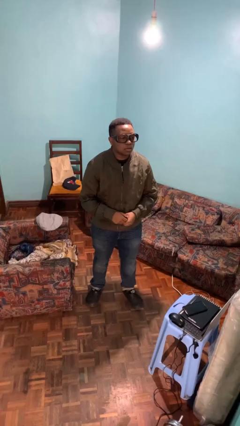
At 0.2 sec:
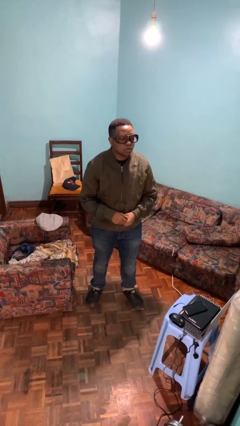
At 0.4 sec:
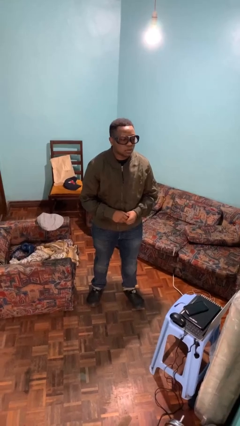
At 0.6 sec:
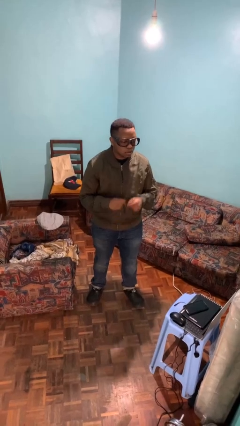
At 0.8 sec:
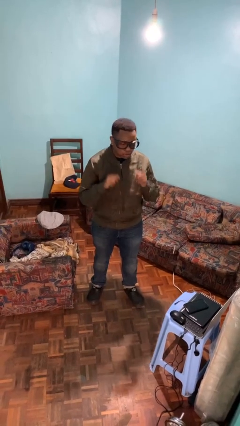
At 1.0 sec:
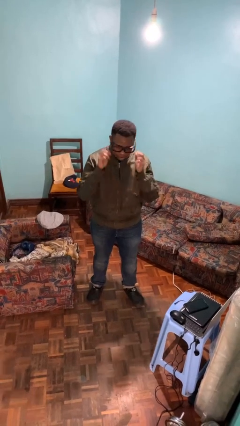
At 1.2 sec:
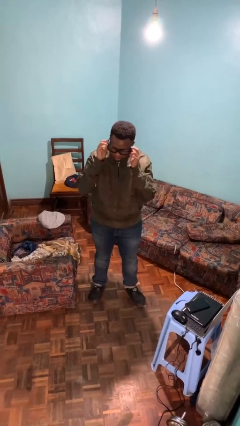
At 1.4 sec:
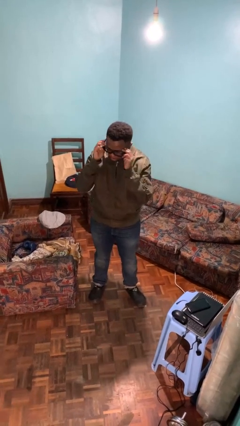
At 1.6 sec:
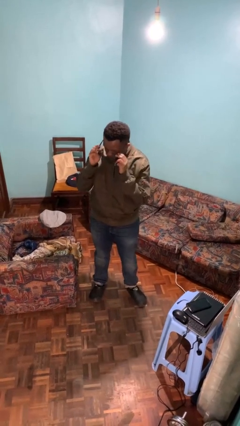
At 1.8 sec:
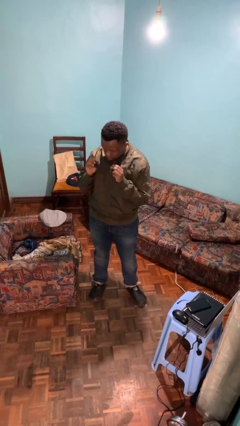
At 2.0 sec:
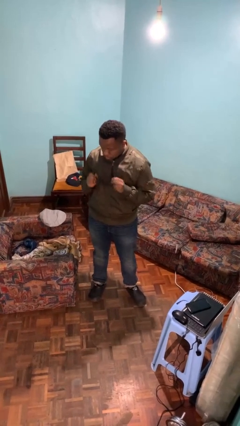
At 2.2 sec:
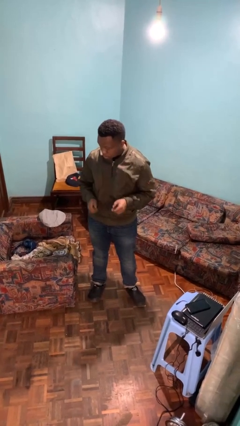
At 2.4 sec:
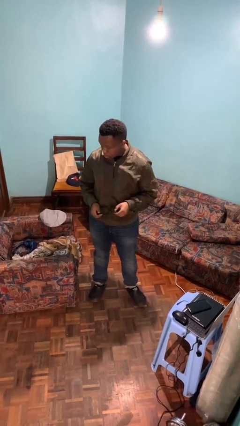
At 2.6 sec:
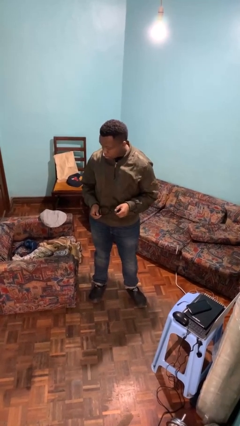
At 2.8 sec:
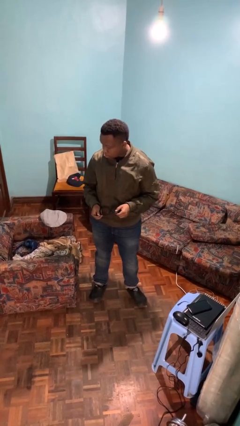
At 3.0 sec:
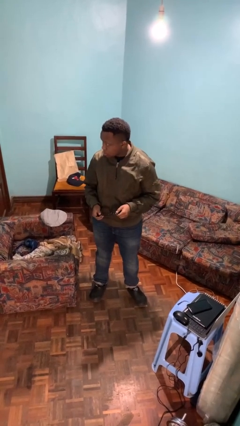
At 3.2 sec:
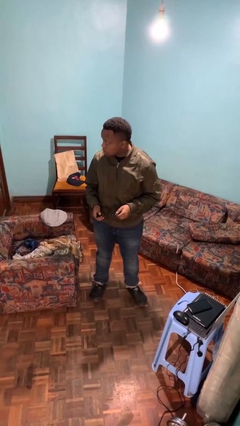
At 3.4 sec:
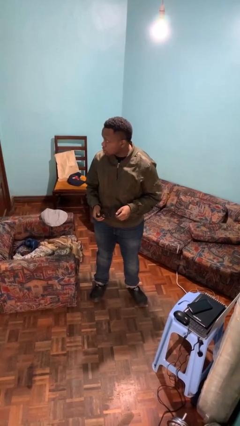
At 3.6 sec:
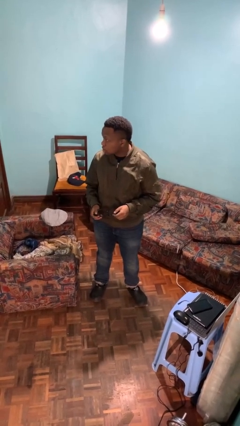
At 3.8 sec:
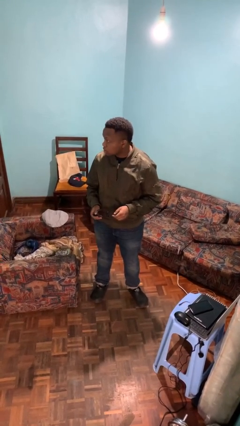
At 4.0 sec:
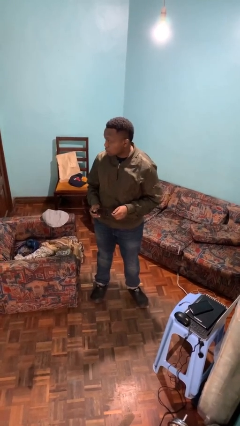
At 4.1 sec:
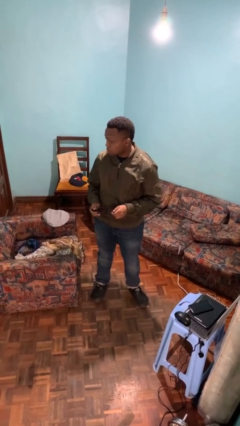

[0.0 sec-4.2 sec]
person takes off glasses

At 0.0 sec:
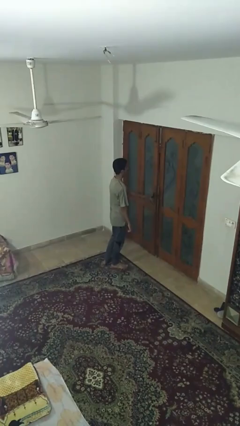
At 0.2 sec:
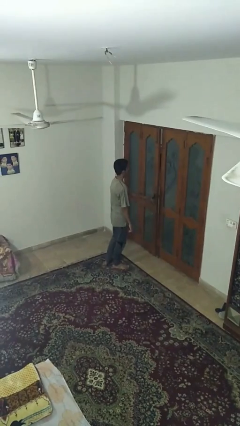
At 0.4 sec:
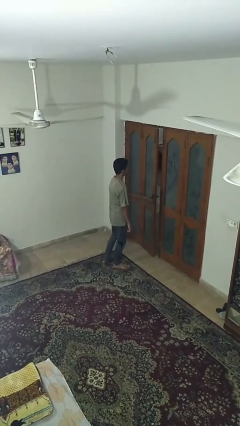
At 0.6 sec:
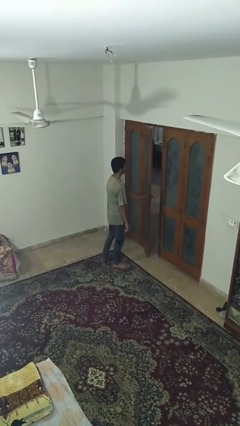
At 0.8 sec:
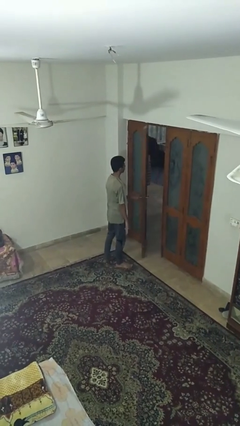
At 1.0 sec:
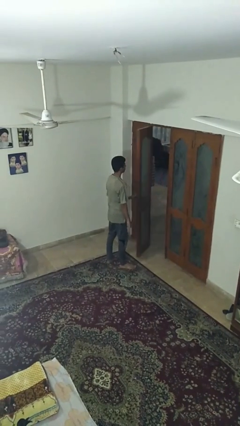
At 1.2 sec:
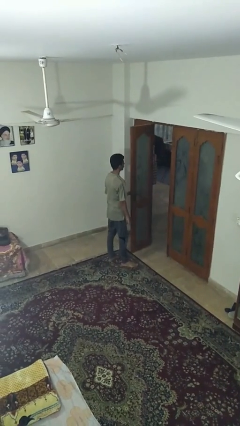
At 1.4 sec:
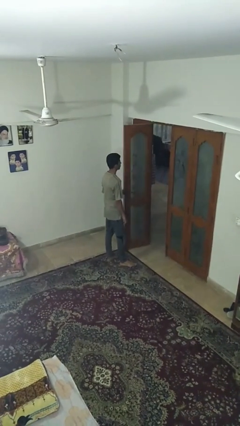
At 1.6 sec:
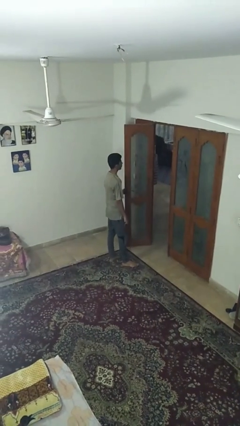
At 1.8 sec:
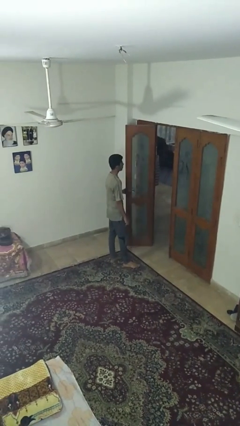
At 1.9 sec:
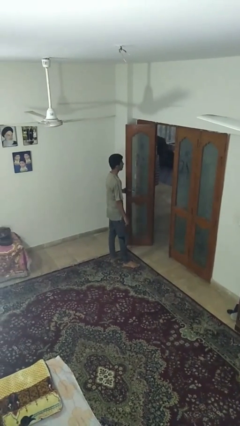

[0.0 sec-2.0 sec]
person opens facility door

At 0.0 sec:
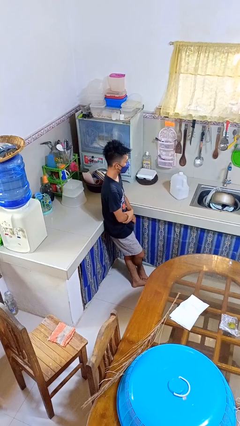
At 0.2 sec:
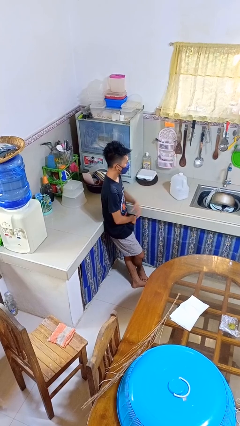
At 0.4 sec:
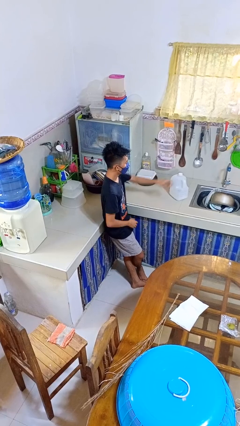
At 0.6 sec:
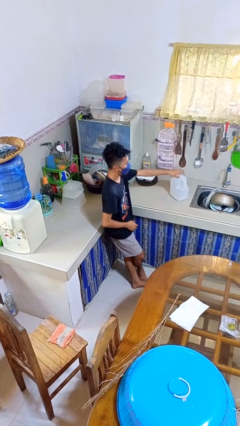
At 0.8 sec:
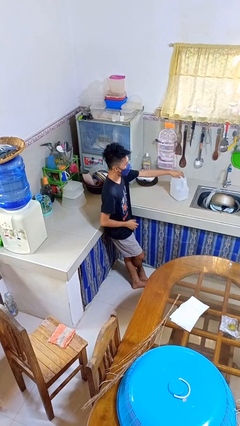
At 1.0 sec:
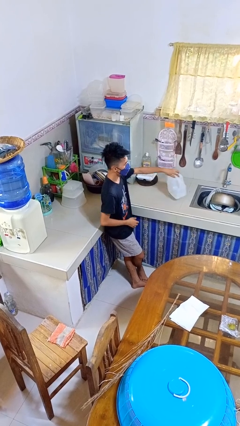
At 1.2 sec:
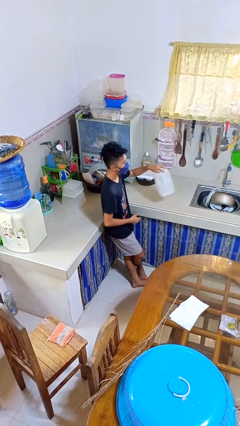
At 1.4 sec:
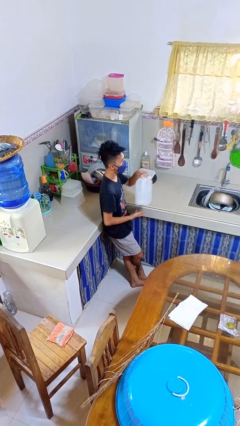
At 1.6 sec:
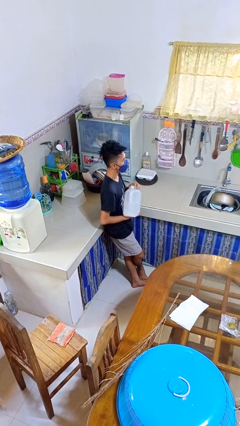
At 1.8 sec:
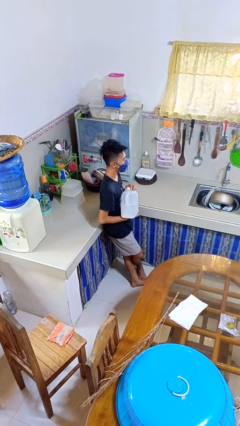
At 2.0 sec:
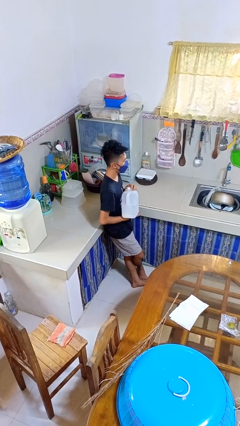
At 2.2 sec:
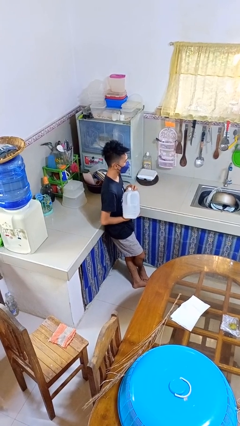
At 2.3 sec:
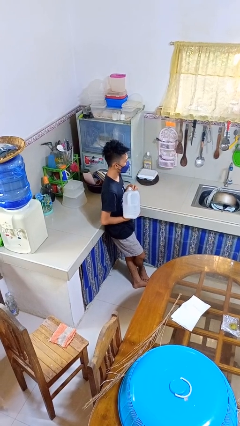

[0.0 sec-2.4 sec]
person picks up object from countertop

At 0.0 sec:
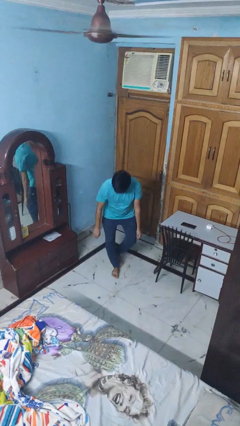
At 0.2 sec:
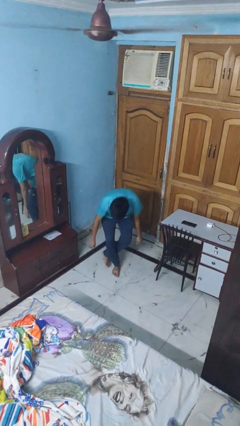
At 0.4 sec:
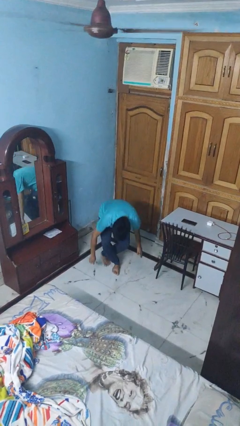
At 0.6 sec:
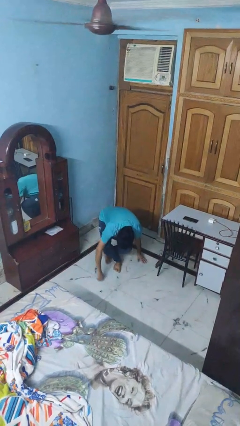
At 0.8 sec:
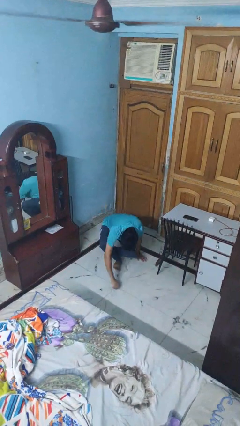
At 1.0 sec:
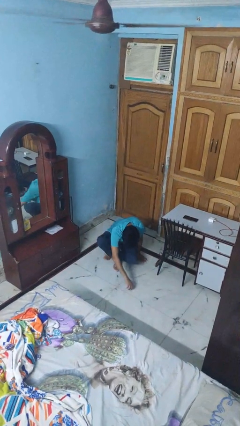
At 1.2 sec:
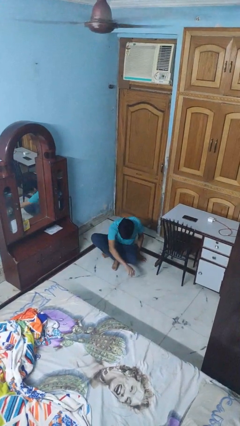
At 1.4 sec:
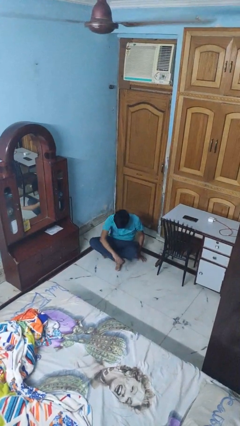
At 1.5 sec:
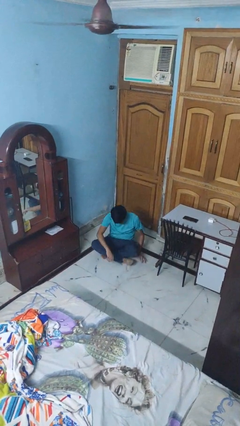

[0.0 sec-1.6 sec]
person sits crisscross

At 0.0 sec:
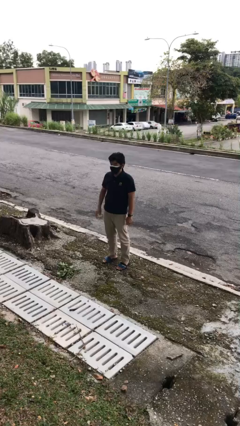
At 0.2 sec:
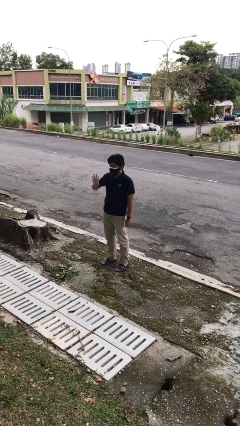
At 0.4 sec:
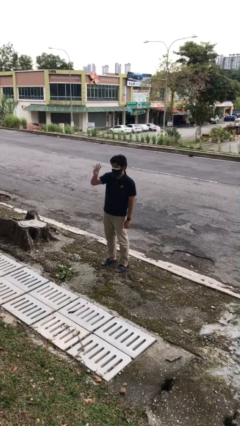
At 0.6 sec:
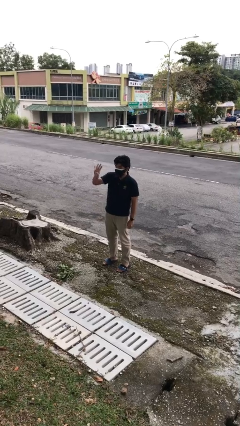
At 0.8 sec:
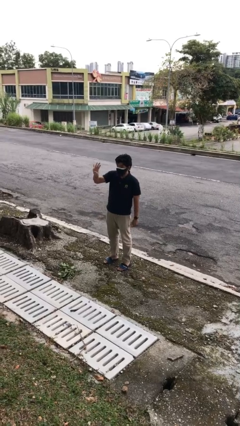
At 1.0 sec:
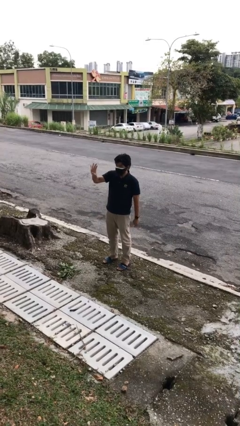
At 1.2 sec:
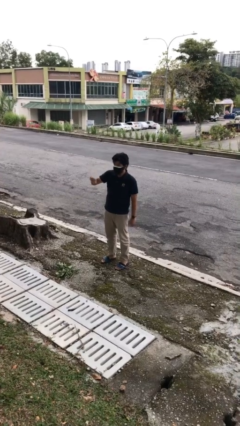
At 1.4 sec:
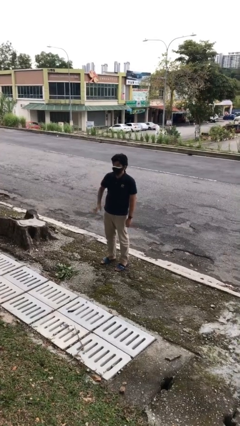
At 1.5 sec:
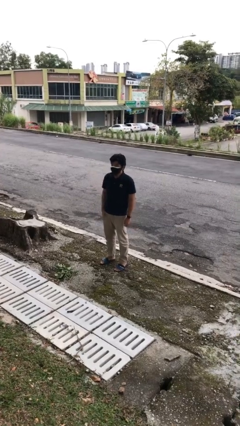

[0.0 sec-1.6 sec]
person gestures number four

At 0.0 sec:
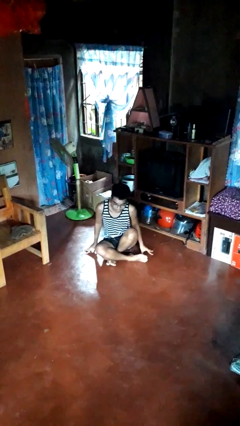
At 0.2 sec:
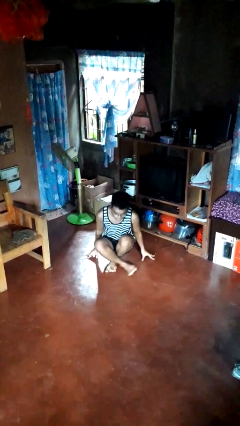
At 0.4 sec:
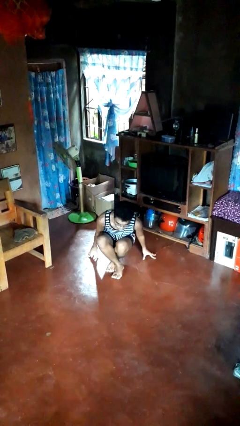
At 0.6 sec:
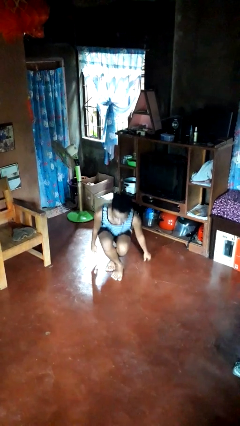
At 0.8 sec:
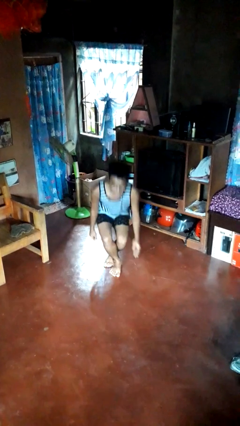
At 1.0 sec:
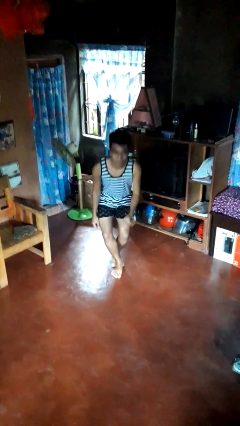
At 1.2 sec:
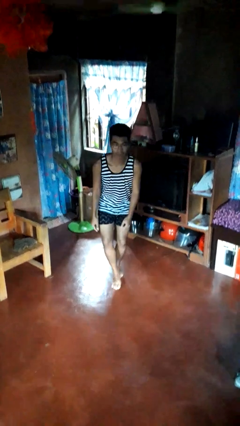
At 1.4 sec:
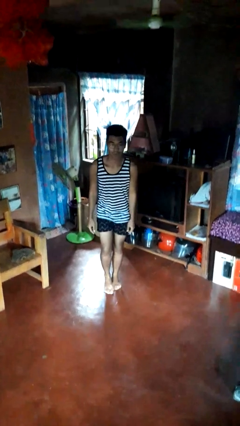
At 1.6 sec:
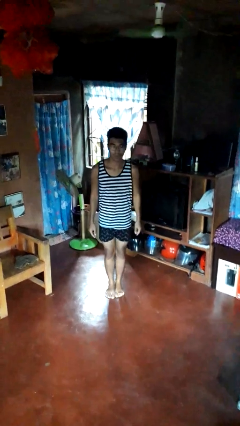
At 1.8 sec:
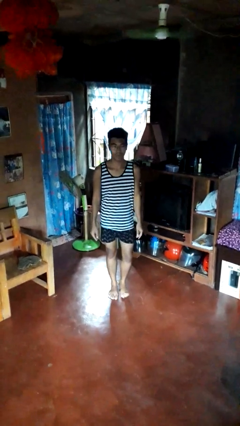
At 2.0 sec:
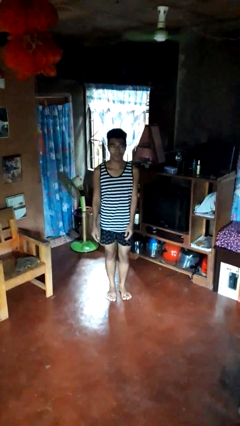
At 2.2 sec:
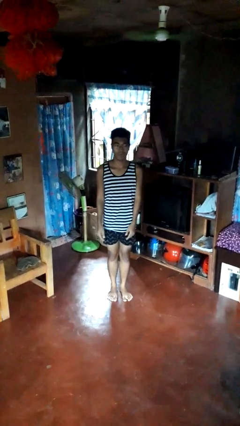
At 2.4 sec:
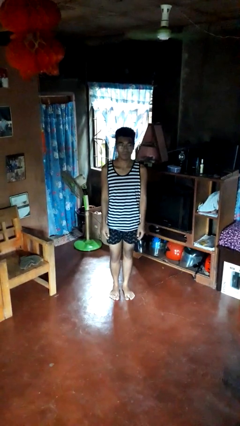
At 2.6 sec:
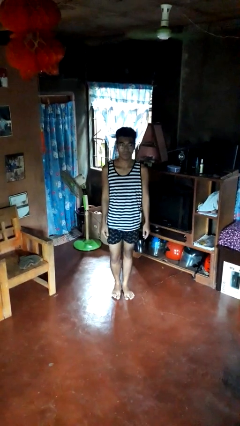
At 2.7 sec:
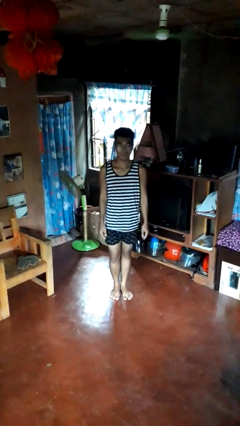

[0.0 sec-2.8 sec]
person stands up from floor

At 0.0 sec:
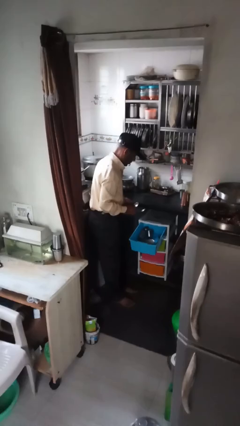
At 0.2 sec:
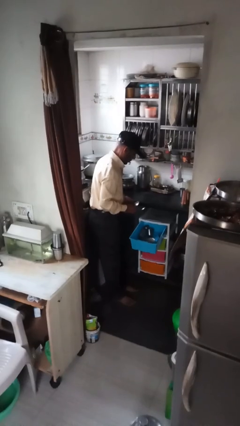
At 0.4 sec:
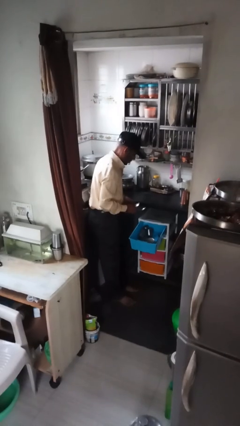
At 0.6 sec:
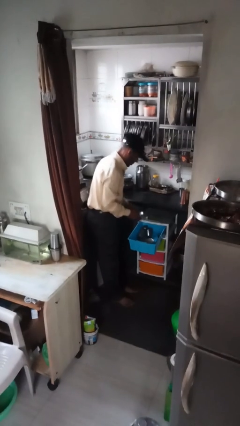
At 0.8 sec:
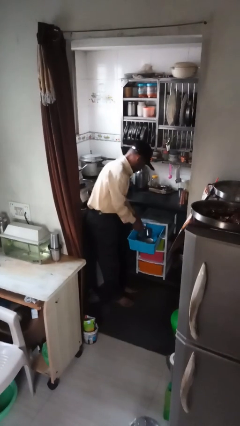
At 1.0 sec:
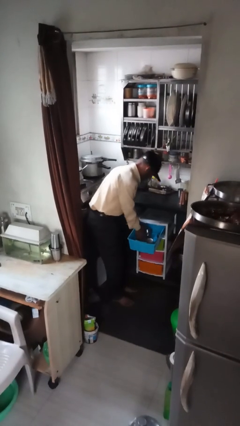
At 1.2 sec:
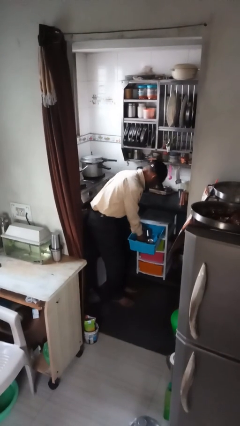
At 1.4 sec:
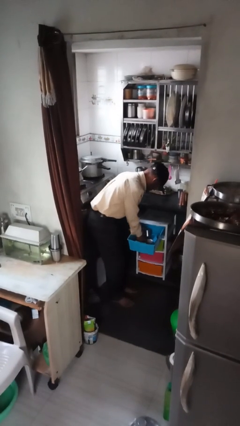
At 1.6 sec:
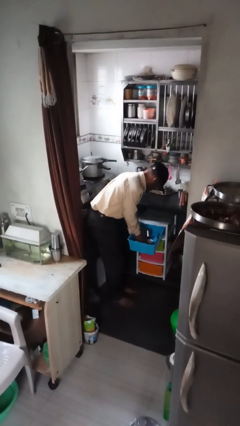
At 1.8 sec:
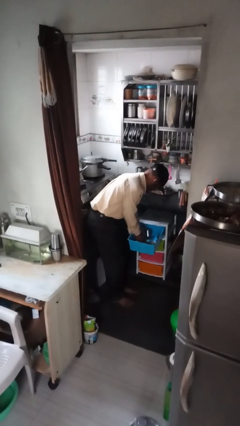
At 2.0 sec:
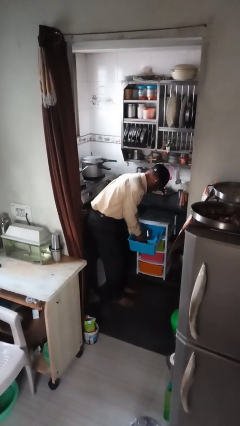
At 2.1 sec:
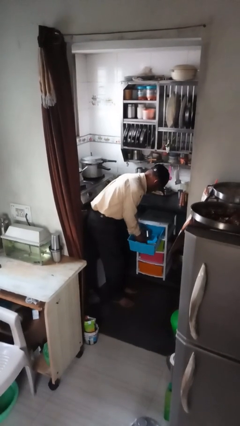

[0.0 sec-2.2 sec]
person puts object into kitchen drawer

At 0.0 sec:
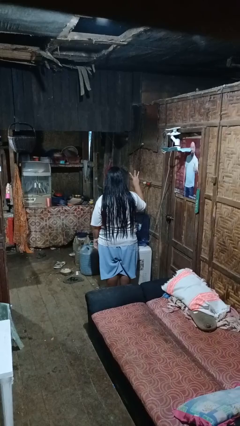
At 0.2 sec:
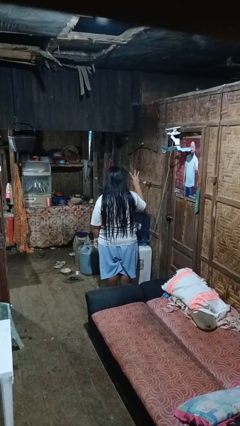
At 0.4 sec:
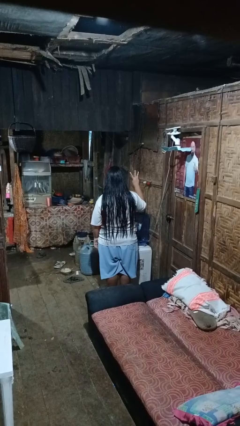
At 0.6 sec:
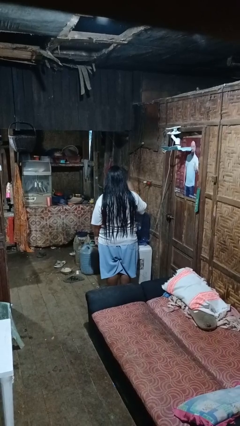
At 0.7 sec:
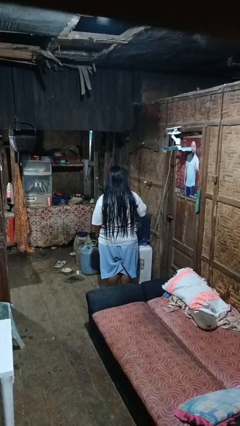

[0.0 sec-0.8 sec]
person gestures number three
